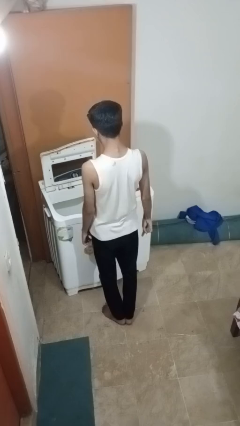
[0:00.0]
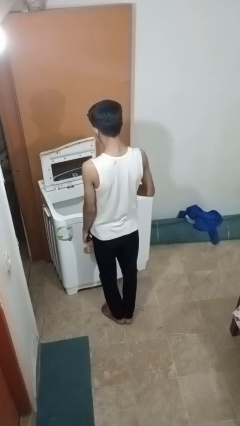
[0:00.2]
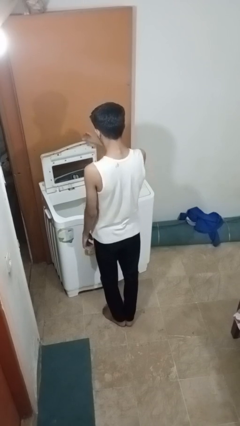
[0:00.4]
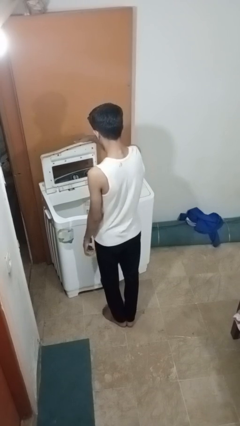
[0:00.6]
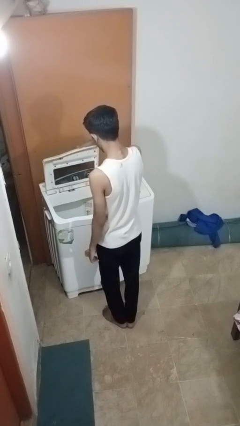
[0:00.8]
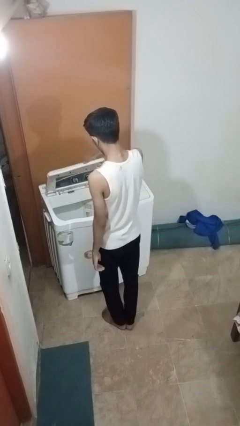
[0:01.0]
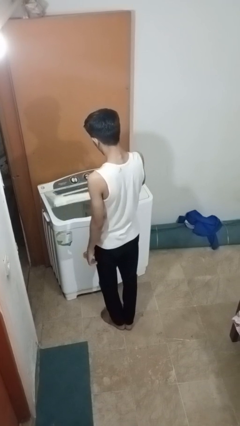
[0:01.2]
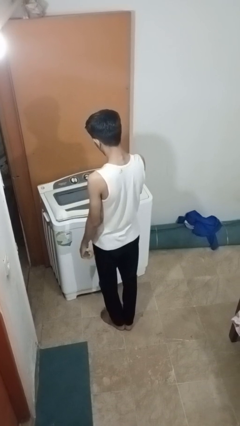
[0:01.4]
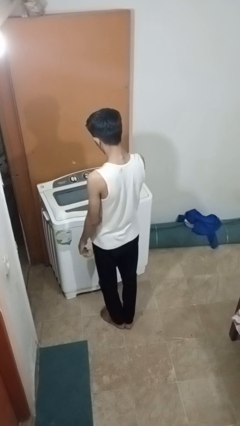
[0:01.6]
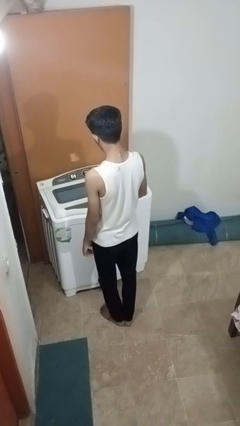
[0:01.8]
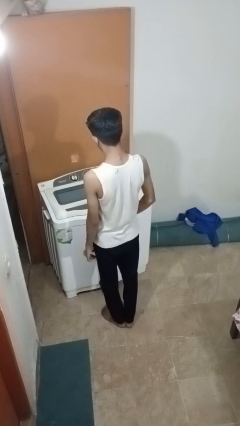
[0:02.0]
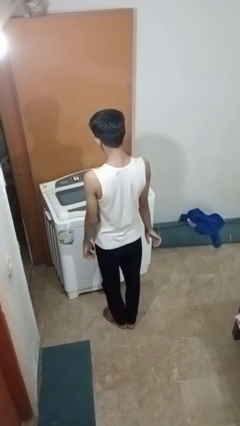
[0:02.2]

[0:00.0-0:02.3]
person closes clothes washer

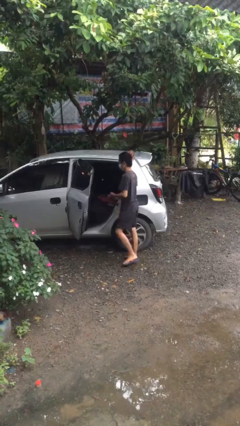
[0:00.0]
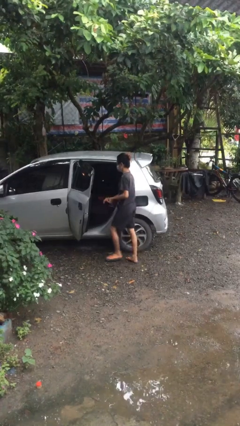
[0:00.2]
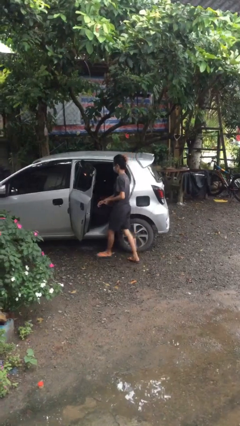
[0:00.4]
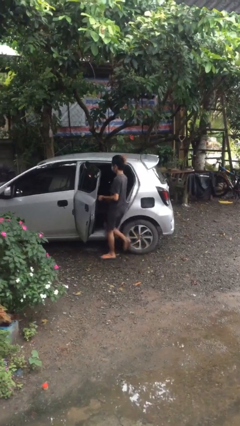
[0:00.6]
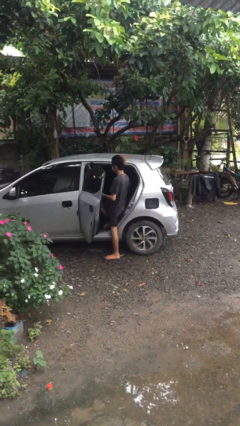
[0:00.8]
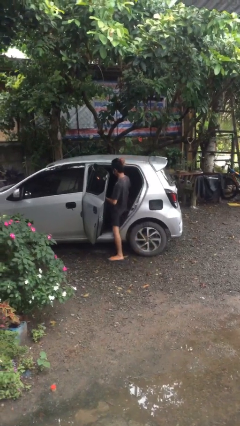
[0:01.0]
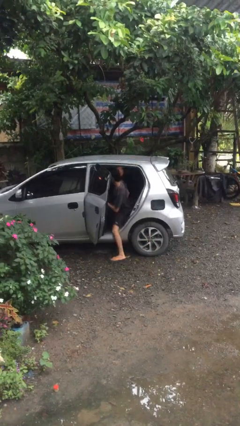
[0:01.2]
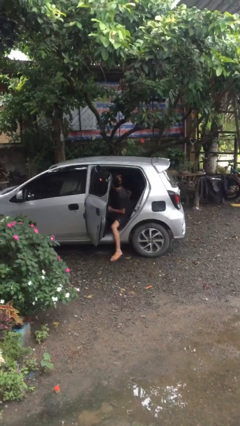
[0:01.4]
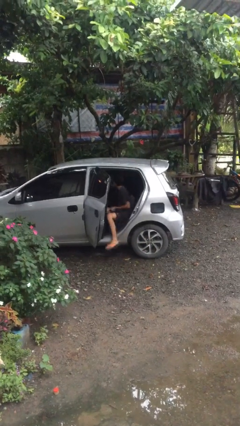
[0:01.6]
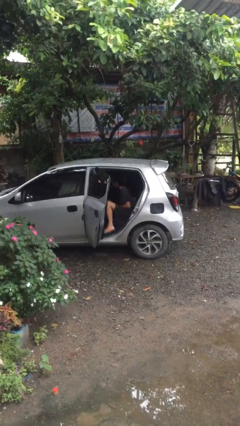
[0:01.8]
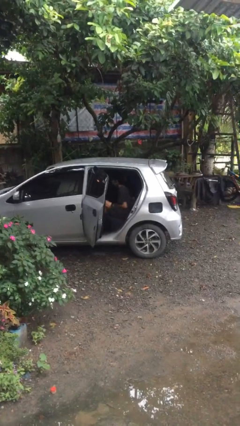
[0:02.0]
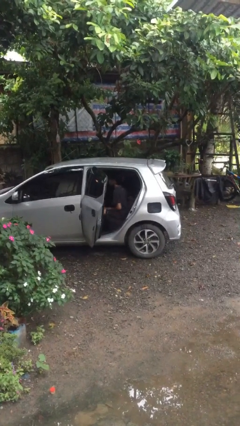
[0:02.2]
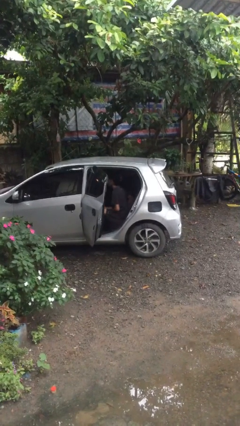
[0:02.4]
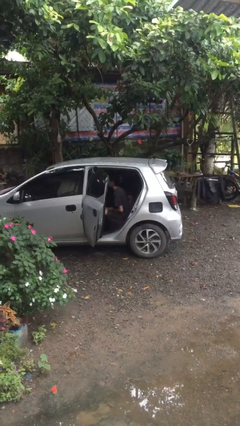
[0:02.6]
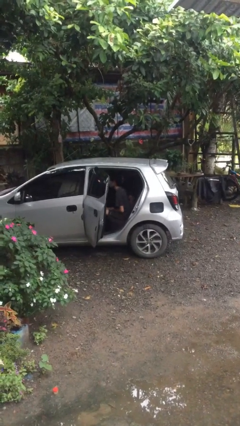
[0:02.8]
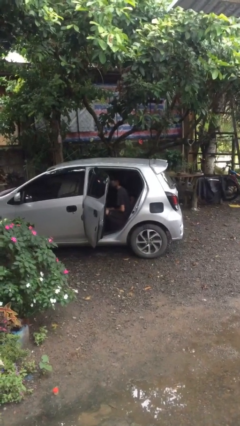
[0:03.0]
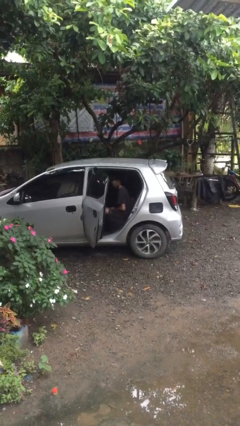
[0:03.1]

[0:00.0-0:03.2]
person enters car

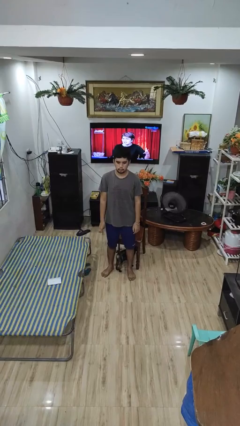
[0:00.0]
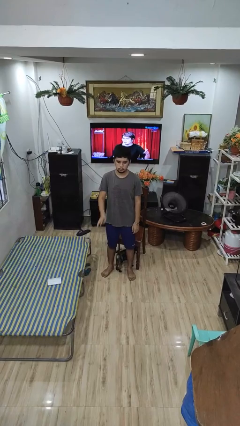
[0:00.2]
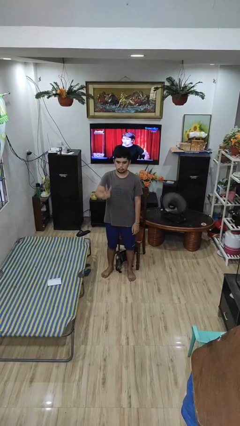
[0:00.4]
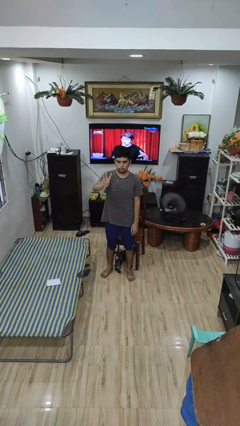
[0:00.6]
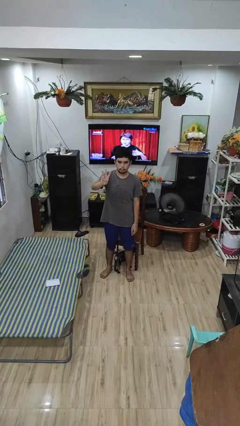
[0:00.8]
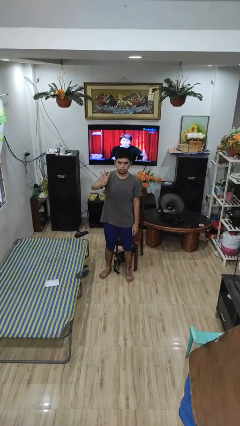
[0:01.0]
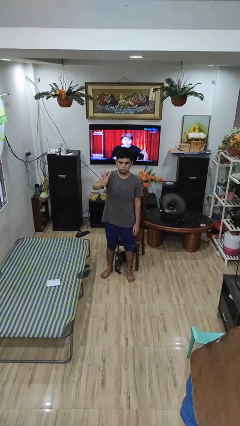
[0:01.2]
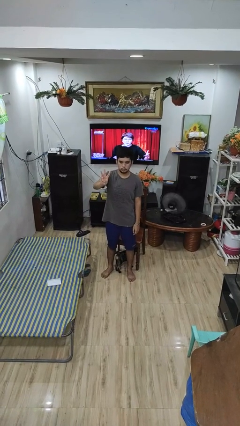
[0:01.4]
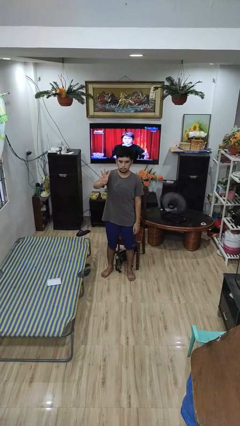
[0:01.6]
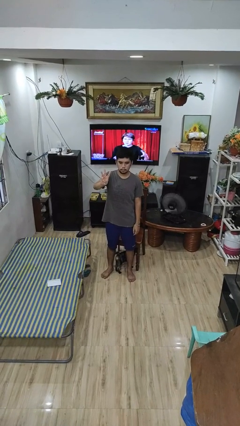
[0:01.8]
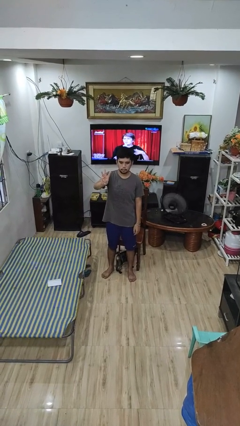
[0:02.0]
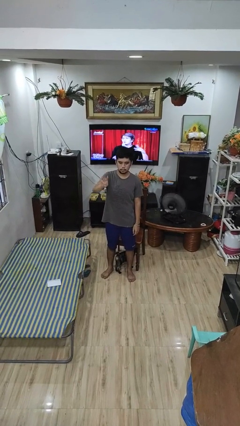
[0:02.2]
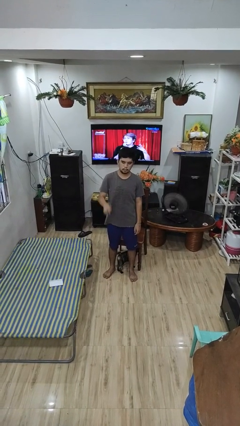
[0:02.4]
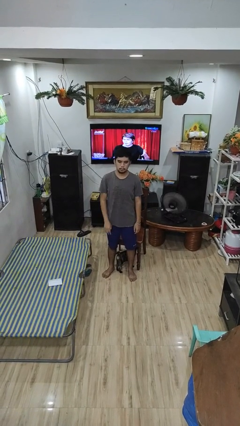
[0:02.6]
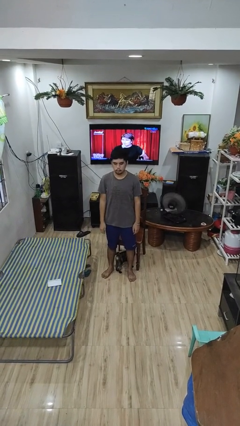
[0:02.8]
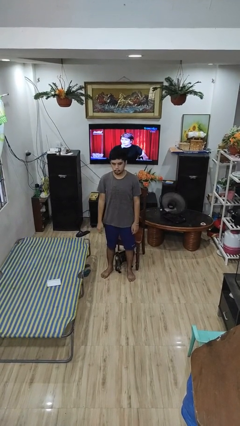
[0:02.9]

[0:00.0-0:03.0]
person gestures number three

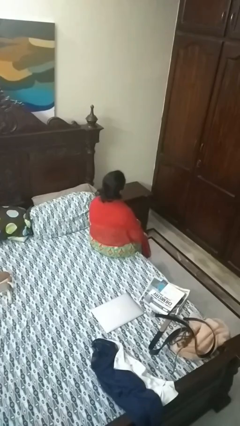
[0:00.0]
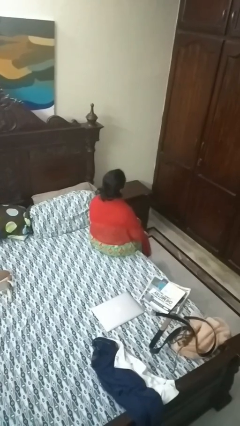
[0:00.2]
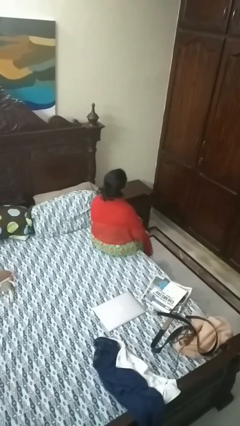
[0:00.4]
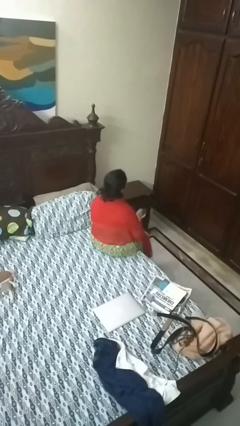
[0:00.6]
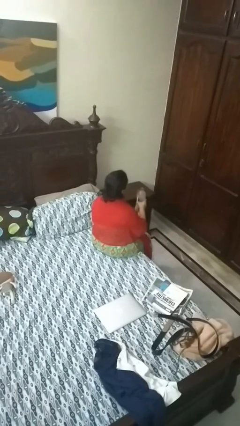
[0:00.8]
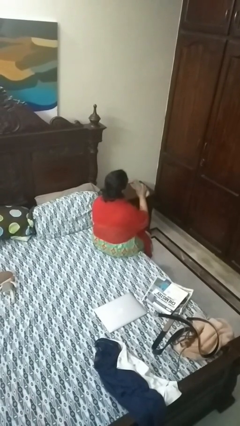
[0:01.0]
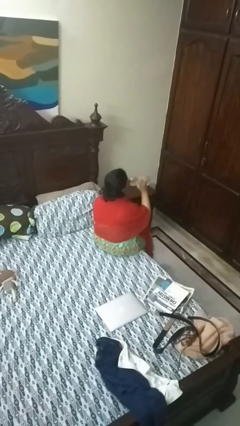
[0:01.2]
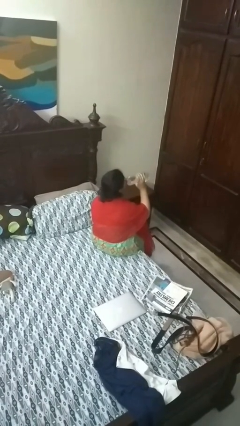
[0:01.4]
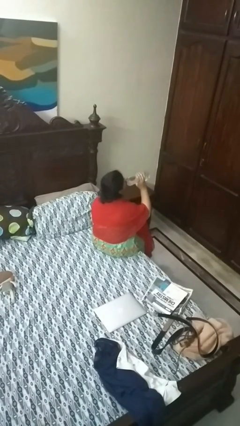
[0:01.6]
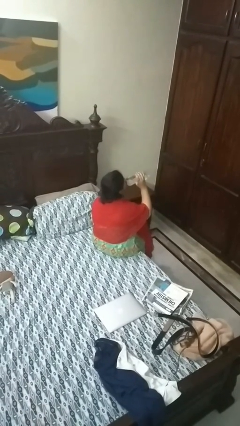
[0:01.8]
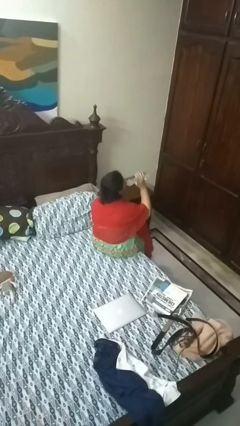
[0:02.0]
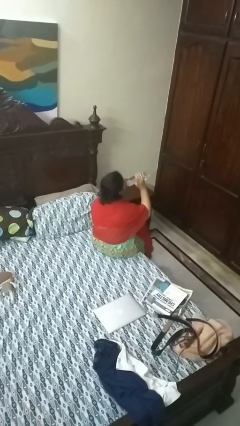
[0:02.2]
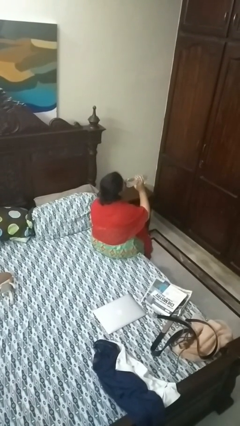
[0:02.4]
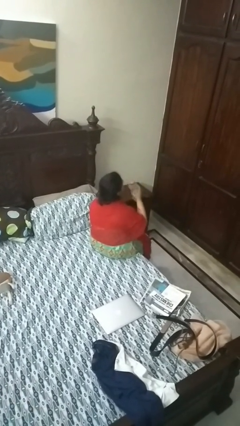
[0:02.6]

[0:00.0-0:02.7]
person drinks from bottle

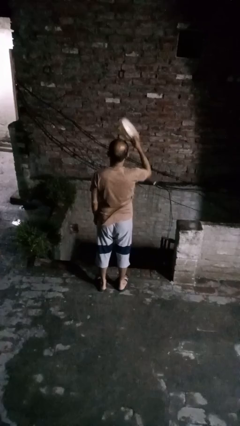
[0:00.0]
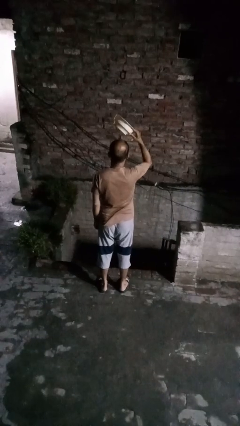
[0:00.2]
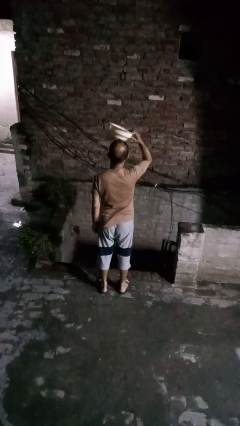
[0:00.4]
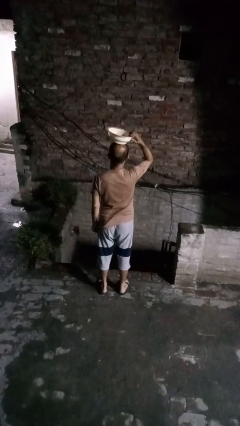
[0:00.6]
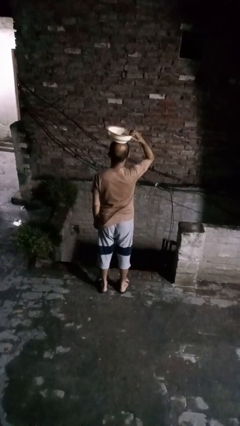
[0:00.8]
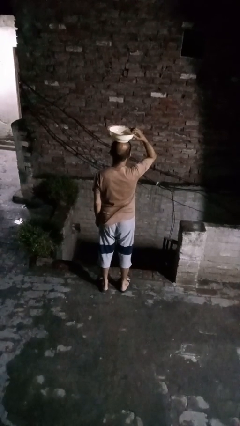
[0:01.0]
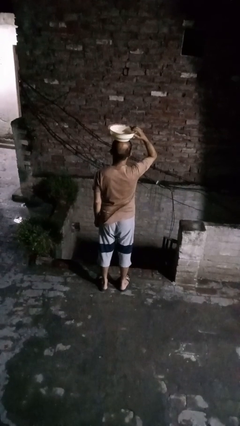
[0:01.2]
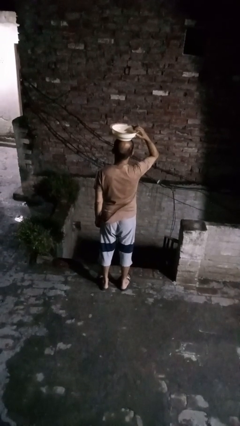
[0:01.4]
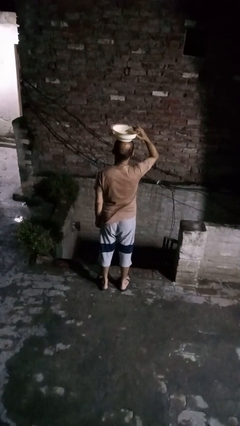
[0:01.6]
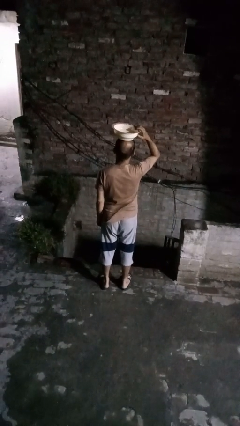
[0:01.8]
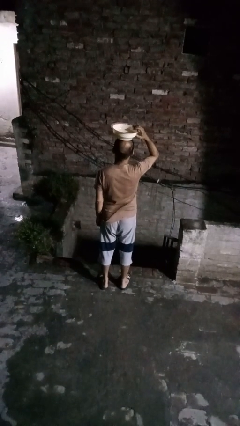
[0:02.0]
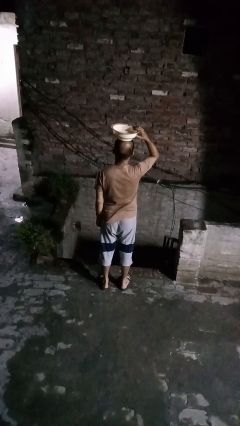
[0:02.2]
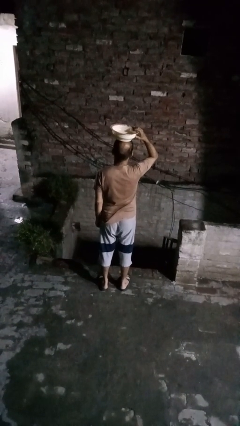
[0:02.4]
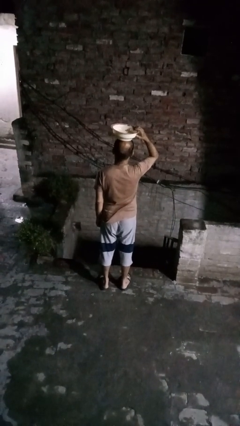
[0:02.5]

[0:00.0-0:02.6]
person holds object above head

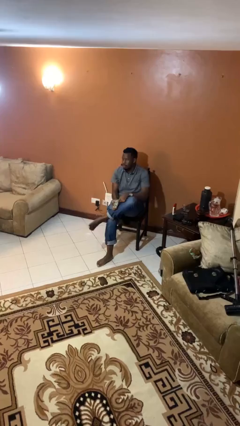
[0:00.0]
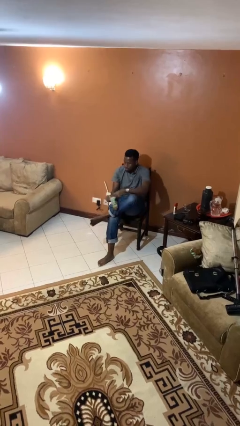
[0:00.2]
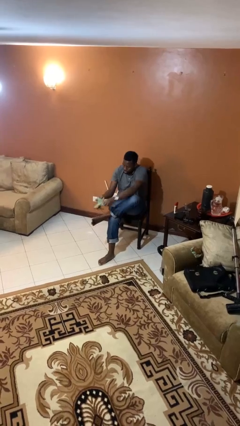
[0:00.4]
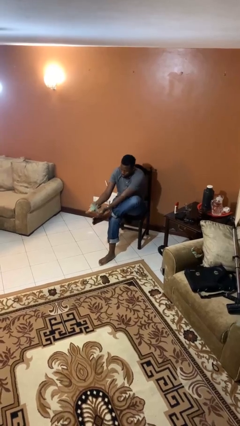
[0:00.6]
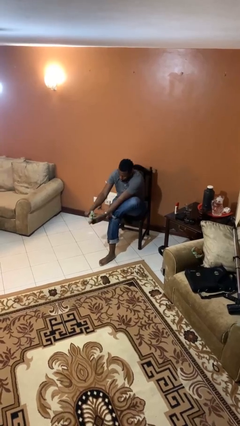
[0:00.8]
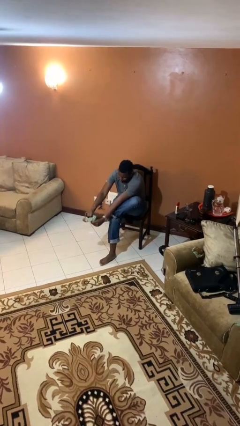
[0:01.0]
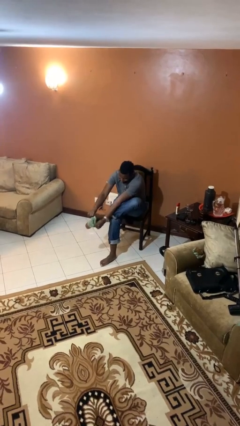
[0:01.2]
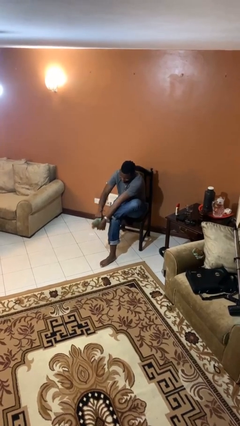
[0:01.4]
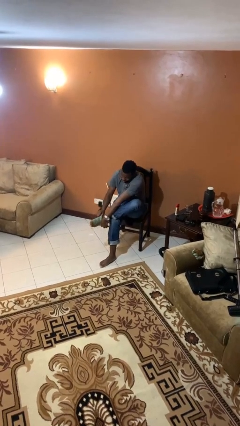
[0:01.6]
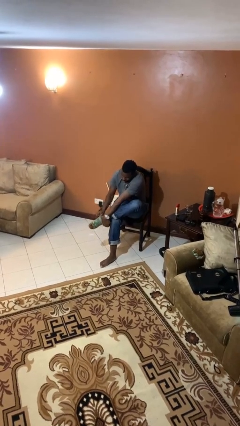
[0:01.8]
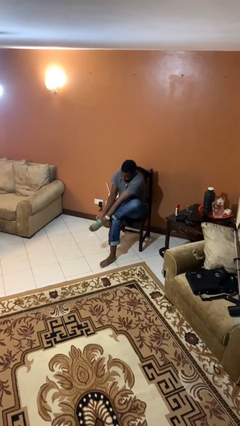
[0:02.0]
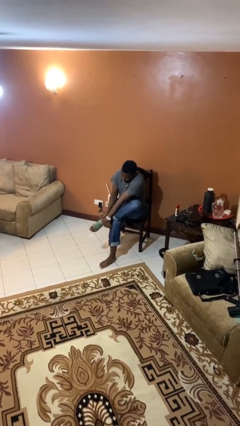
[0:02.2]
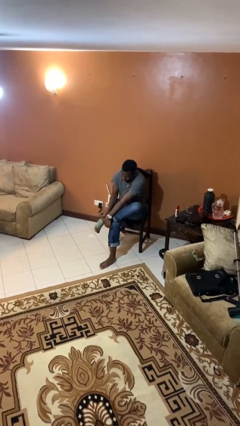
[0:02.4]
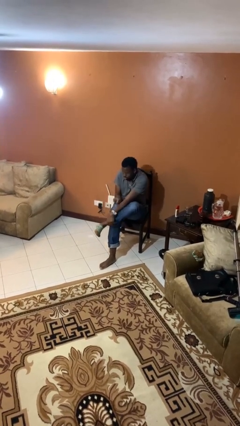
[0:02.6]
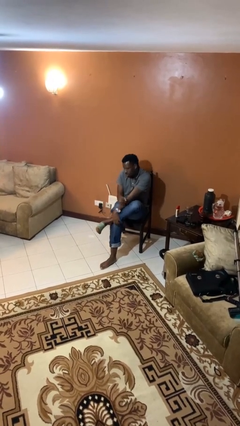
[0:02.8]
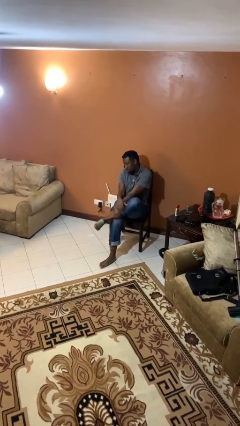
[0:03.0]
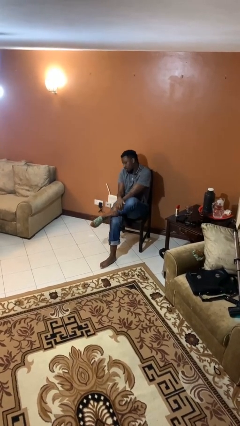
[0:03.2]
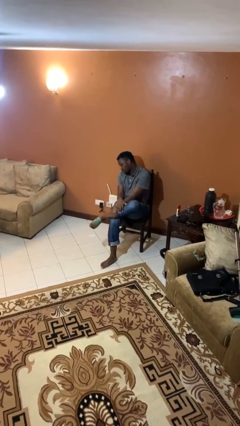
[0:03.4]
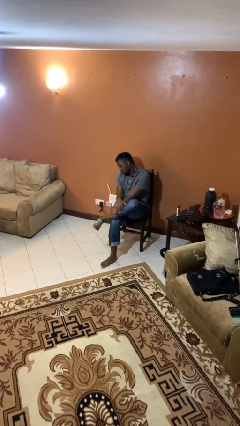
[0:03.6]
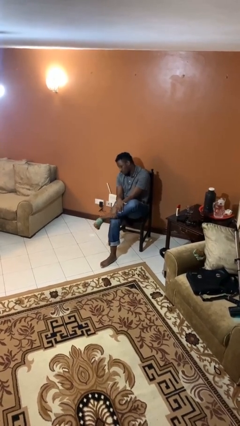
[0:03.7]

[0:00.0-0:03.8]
person puts on socks
